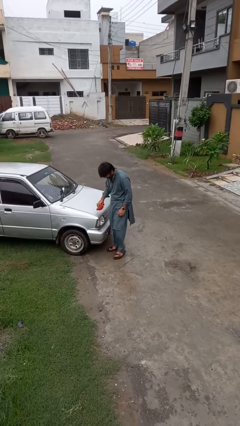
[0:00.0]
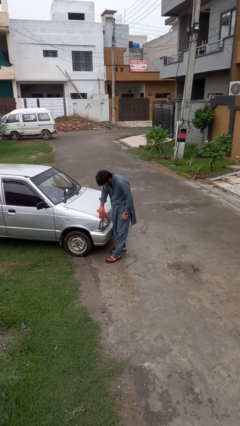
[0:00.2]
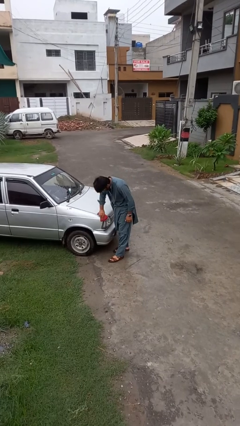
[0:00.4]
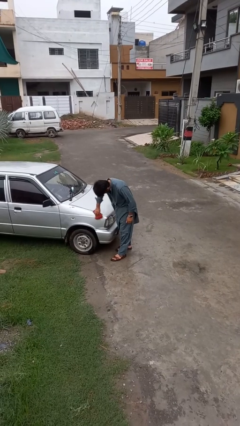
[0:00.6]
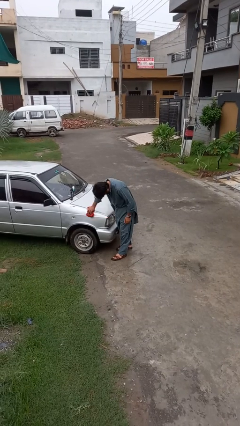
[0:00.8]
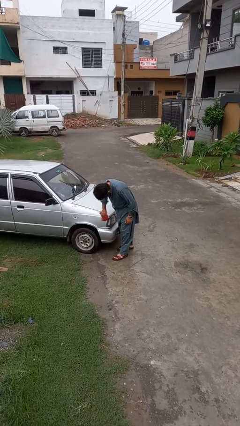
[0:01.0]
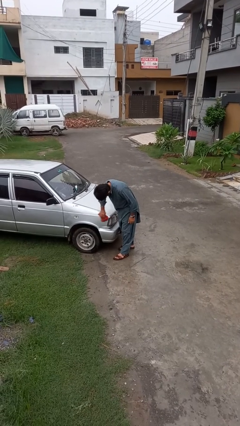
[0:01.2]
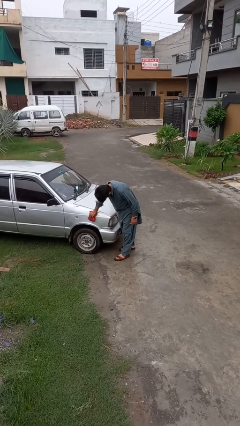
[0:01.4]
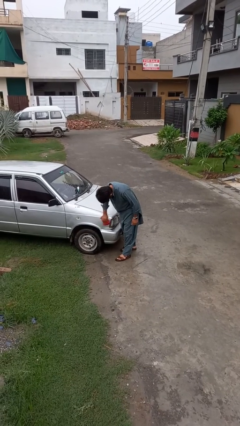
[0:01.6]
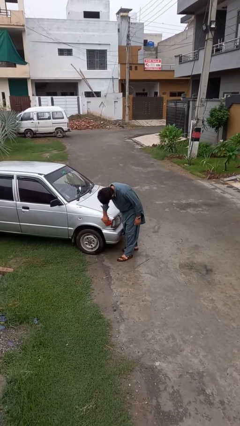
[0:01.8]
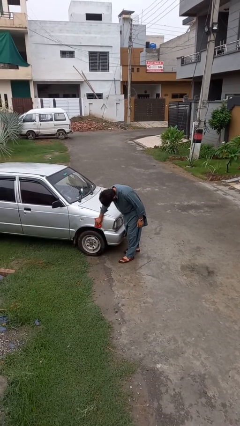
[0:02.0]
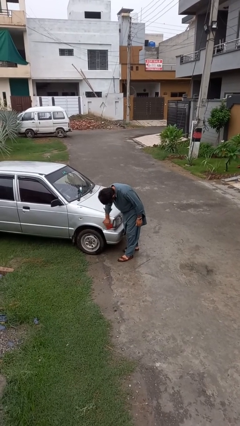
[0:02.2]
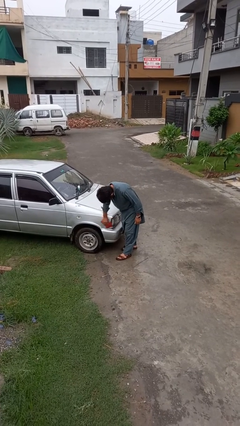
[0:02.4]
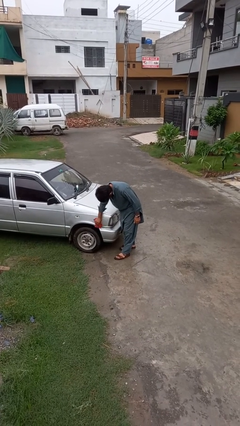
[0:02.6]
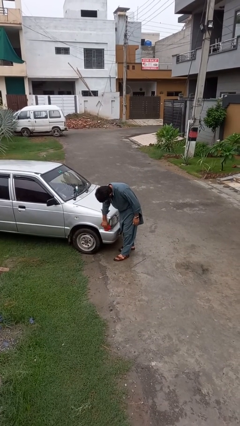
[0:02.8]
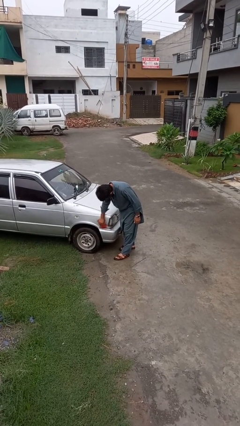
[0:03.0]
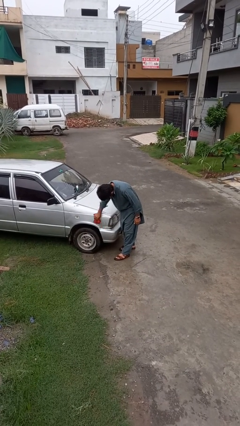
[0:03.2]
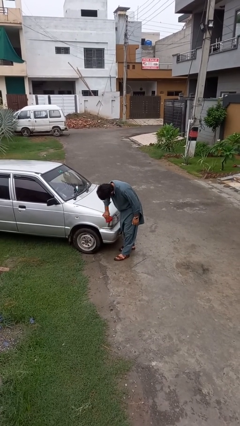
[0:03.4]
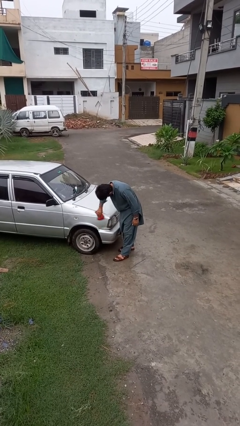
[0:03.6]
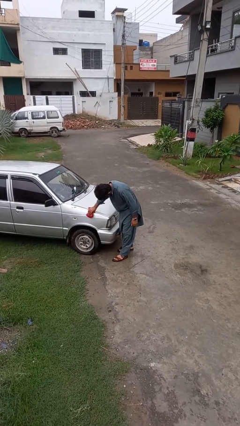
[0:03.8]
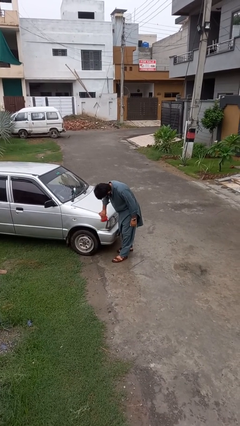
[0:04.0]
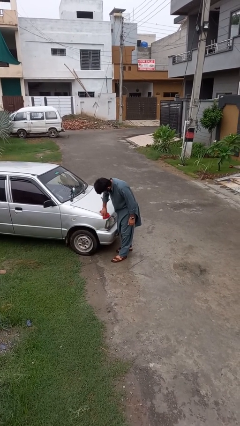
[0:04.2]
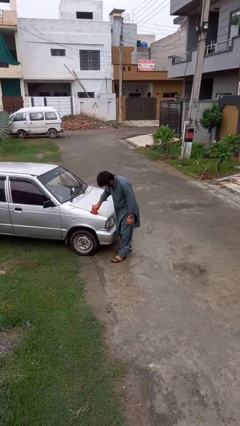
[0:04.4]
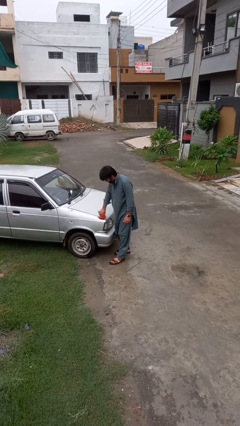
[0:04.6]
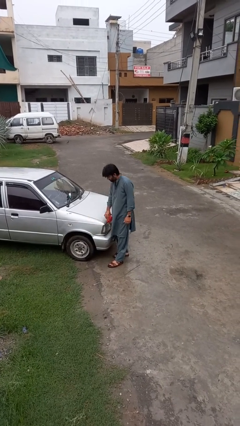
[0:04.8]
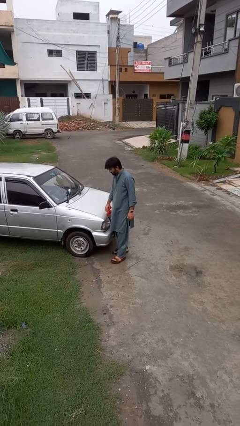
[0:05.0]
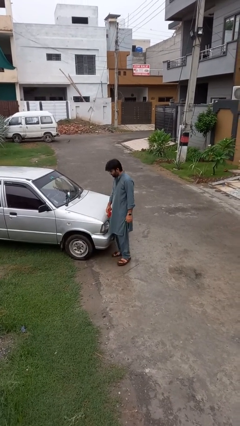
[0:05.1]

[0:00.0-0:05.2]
person polishes car with rag

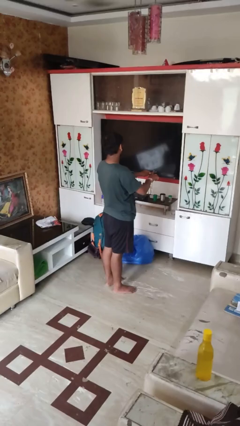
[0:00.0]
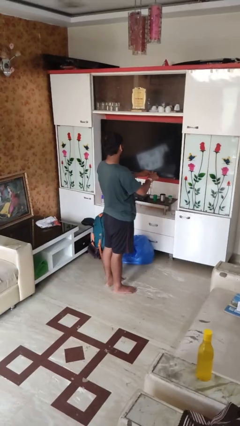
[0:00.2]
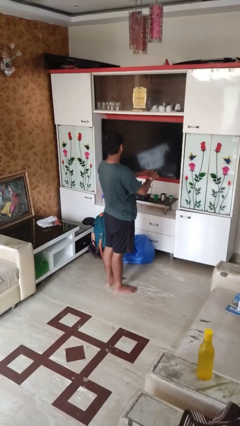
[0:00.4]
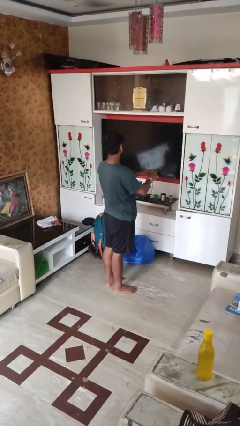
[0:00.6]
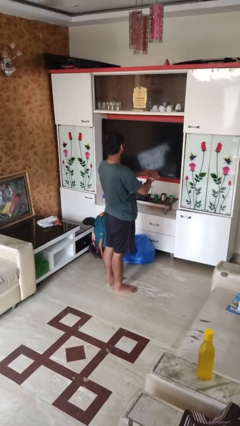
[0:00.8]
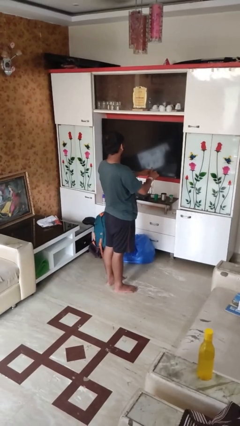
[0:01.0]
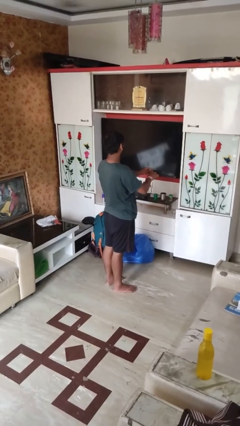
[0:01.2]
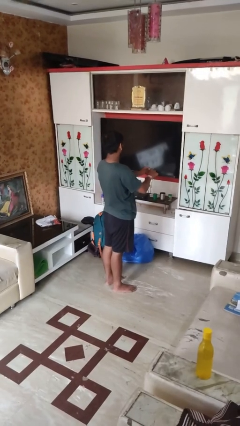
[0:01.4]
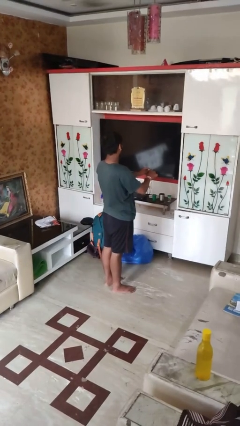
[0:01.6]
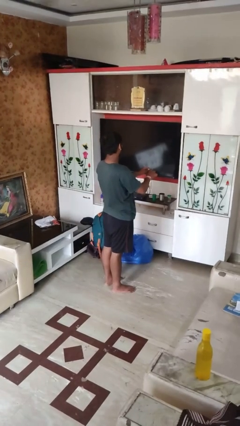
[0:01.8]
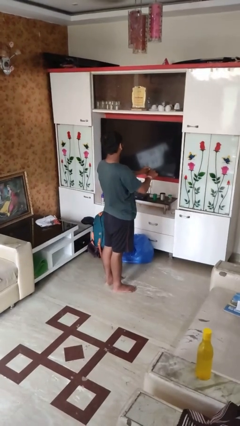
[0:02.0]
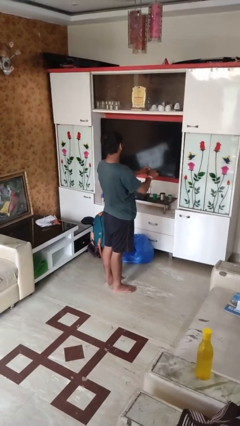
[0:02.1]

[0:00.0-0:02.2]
person files fingernails

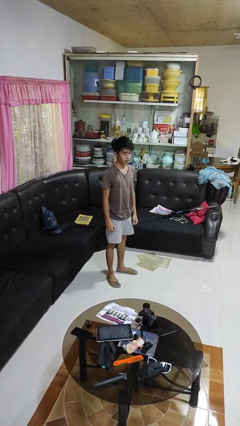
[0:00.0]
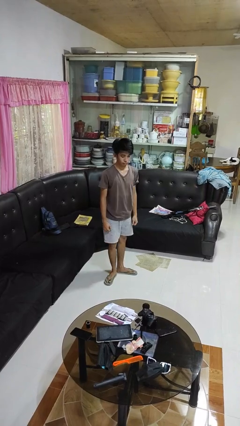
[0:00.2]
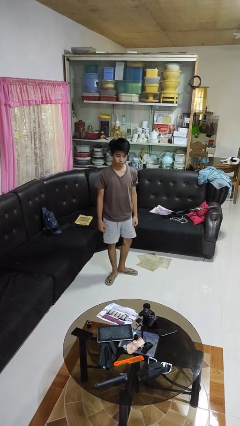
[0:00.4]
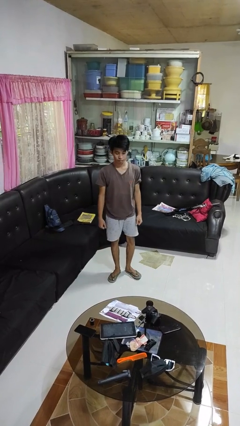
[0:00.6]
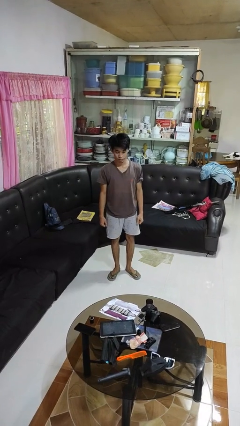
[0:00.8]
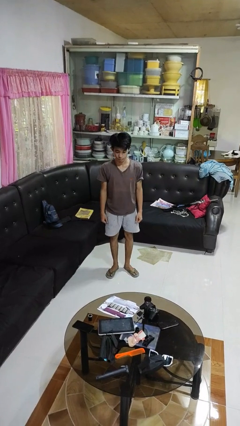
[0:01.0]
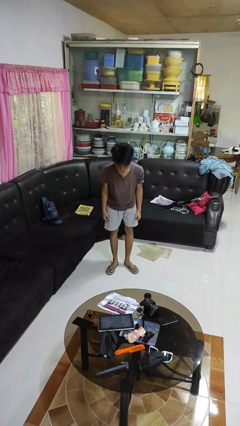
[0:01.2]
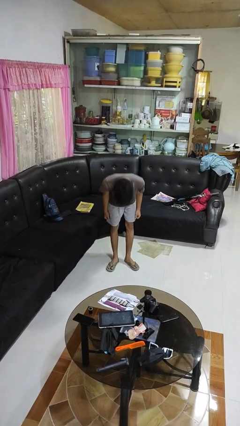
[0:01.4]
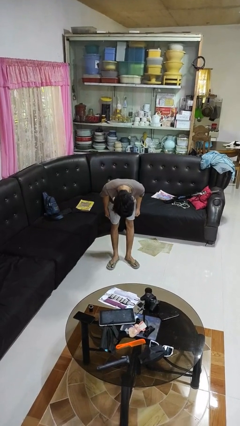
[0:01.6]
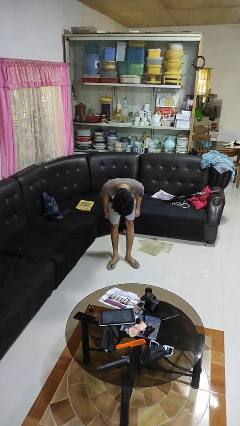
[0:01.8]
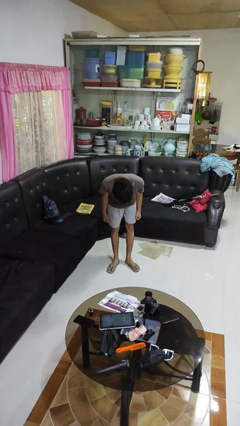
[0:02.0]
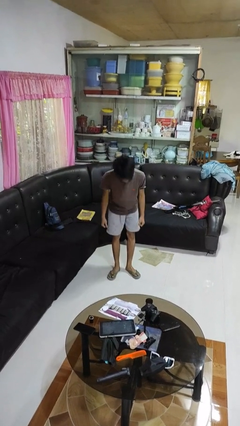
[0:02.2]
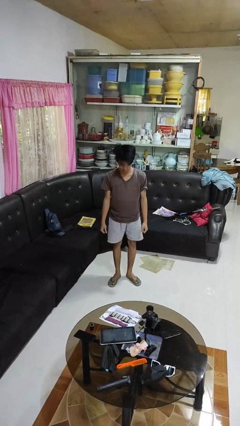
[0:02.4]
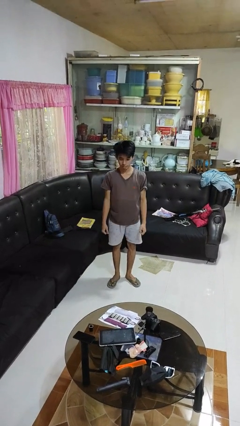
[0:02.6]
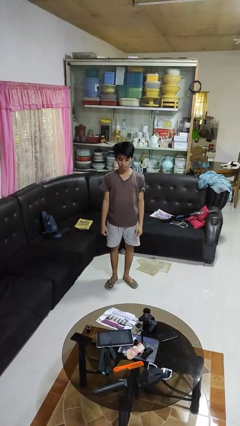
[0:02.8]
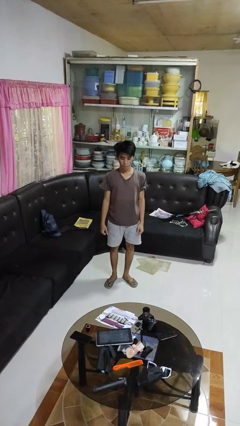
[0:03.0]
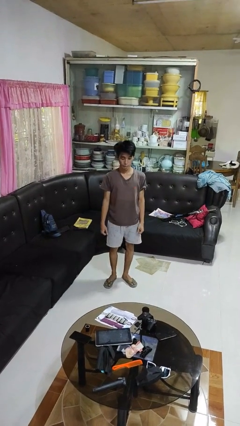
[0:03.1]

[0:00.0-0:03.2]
person bows

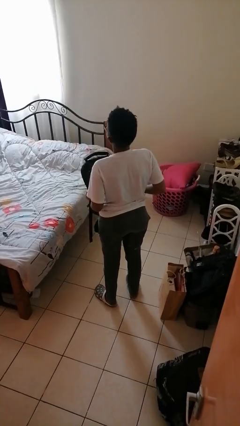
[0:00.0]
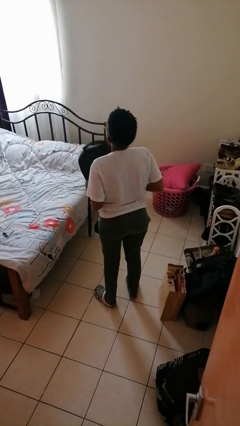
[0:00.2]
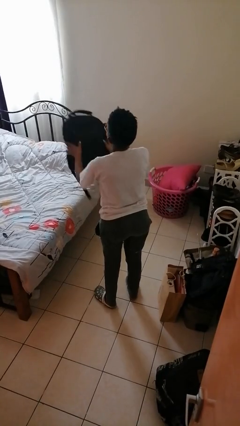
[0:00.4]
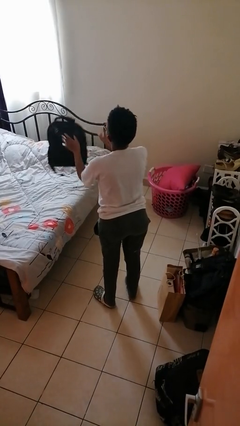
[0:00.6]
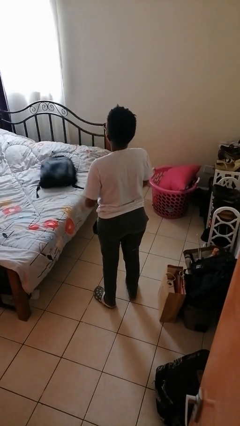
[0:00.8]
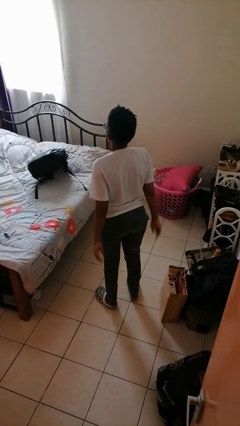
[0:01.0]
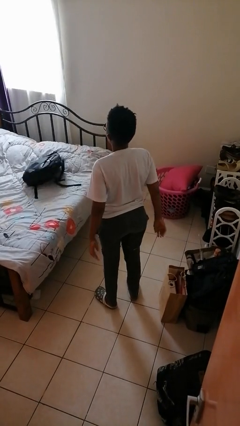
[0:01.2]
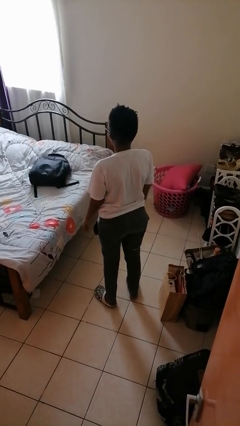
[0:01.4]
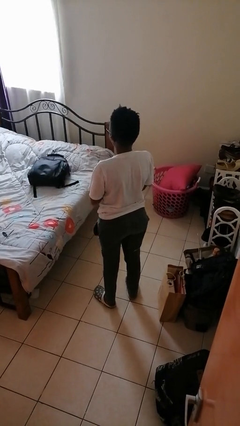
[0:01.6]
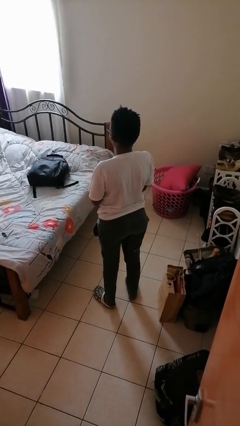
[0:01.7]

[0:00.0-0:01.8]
person throws object on bed

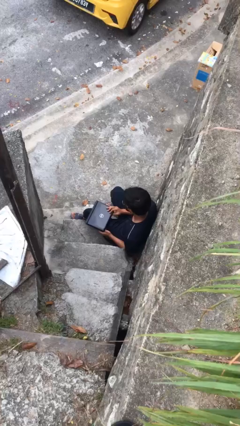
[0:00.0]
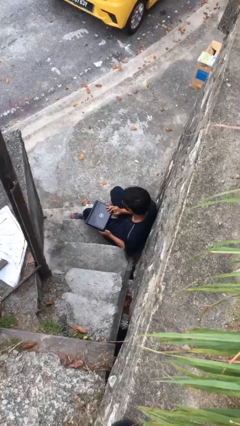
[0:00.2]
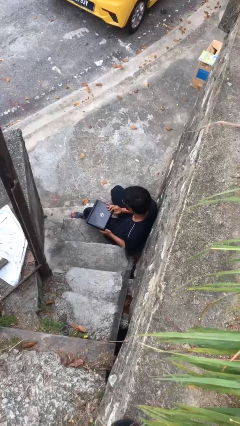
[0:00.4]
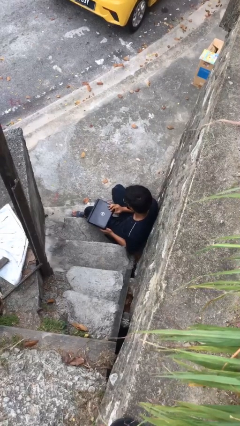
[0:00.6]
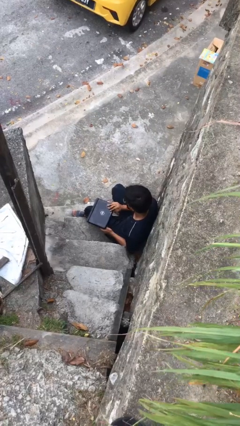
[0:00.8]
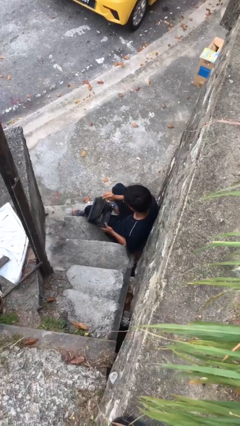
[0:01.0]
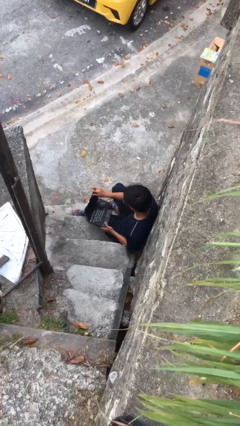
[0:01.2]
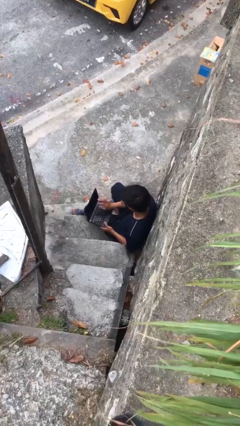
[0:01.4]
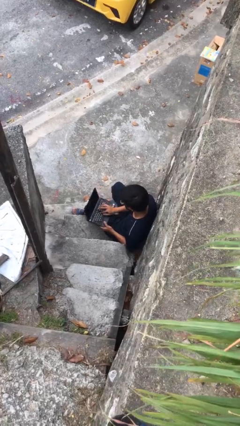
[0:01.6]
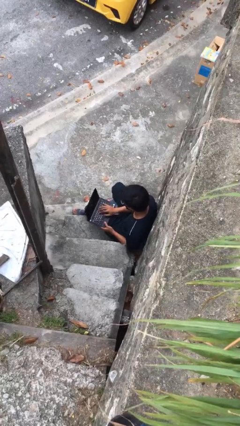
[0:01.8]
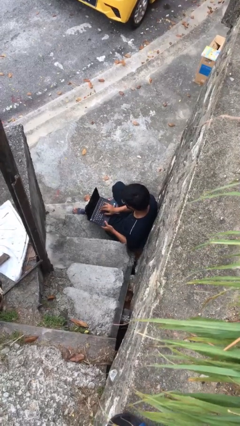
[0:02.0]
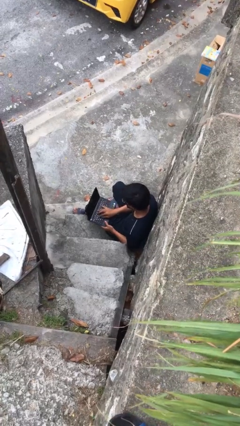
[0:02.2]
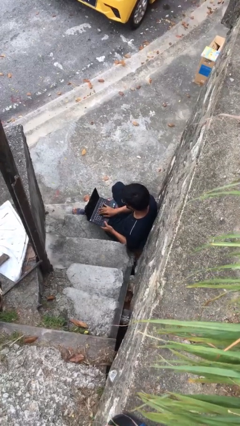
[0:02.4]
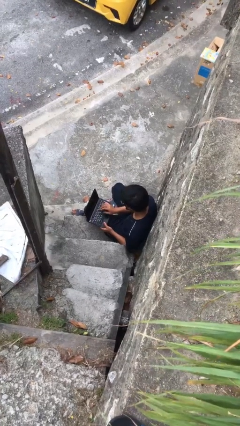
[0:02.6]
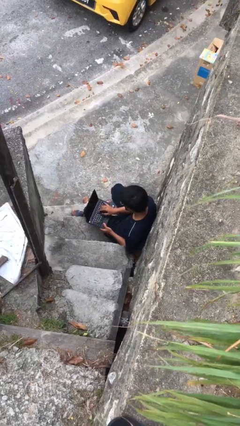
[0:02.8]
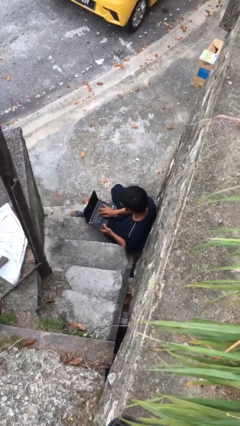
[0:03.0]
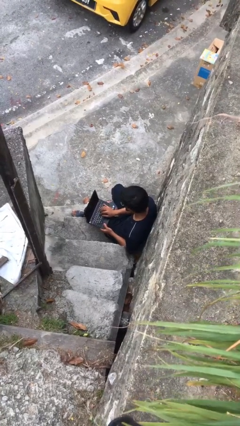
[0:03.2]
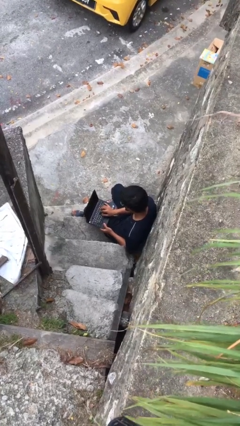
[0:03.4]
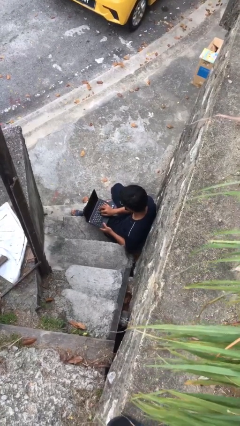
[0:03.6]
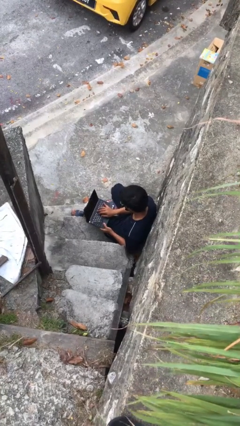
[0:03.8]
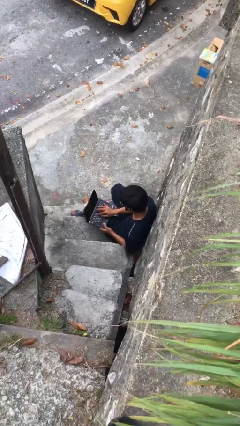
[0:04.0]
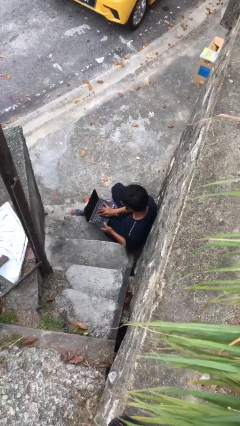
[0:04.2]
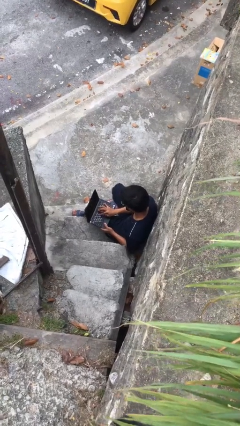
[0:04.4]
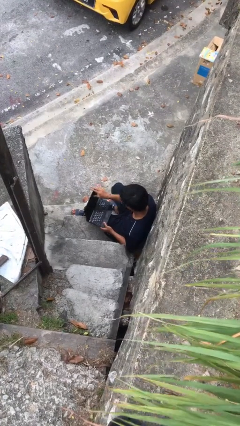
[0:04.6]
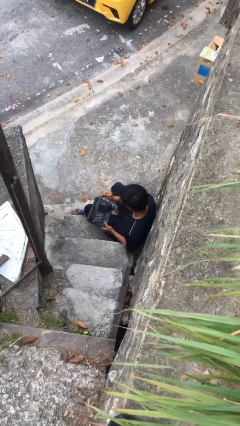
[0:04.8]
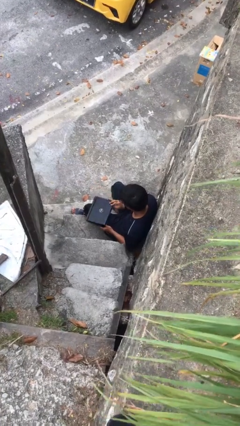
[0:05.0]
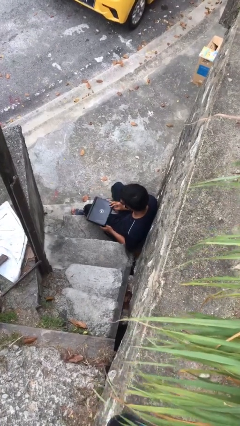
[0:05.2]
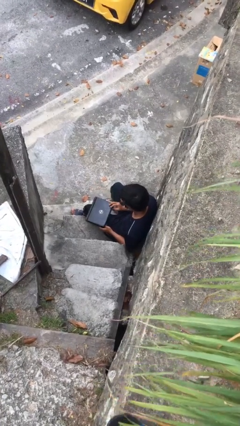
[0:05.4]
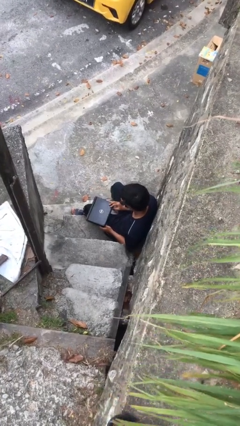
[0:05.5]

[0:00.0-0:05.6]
person interacts with laptop
